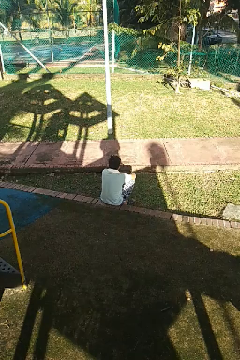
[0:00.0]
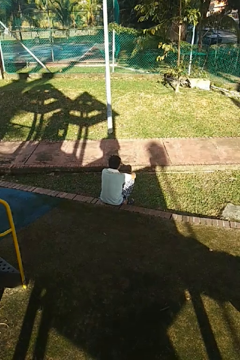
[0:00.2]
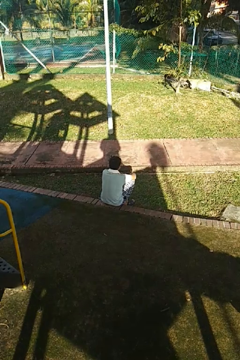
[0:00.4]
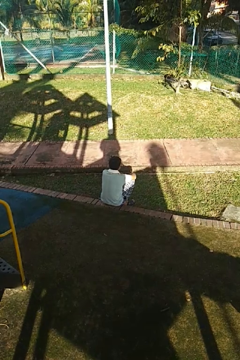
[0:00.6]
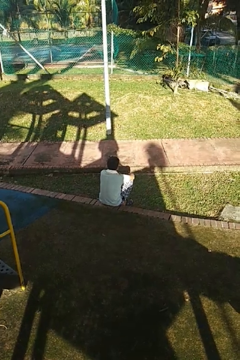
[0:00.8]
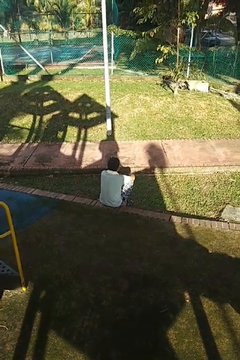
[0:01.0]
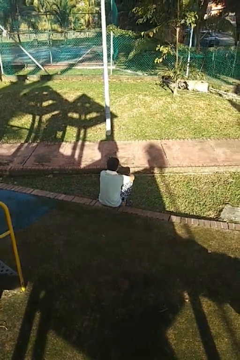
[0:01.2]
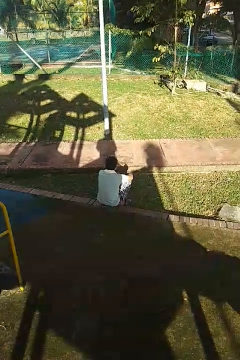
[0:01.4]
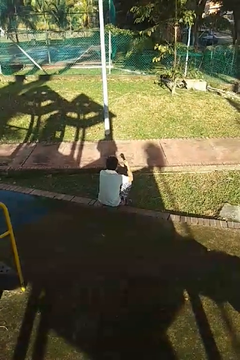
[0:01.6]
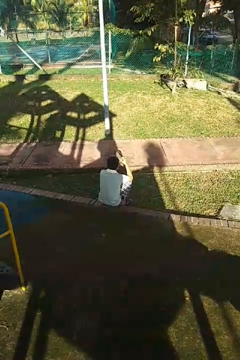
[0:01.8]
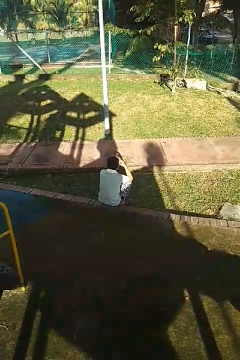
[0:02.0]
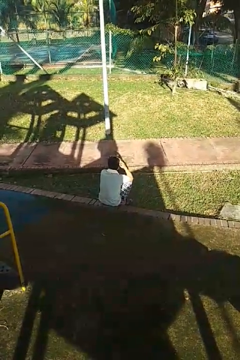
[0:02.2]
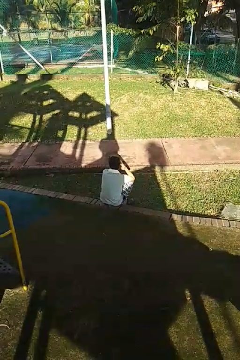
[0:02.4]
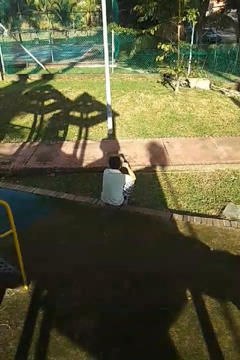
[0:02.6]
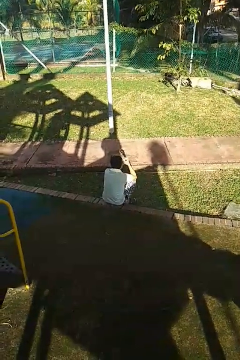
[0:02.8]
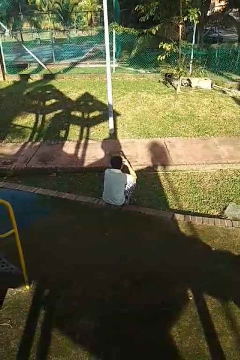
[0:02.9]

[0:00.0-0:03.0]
person strokes hair

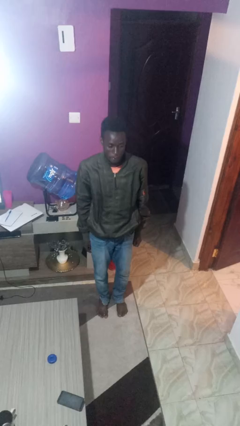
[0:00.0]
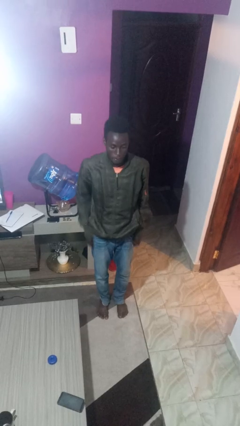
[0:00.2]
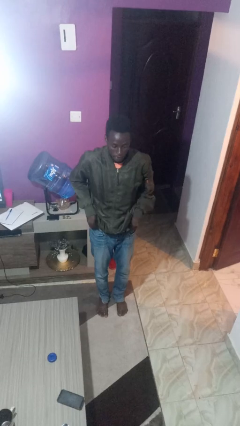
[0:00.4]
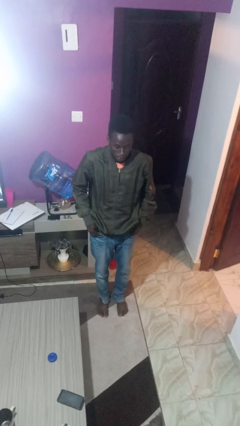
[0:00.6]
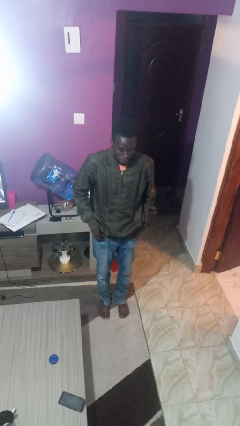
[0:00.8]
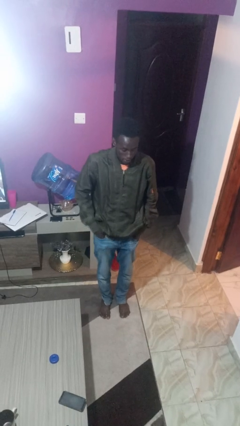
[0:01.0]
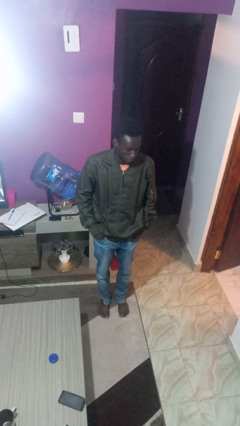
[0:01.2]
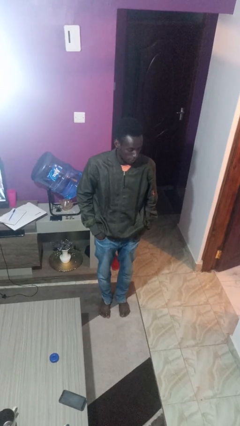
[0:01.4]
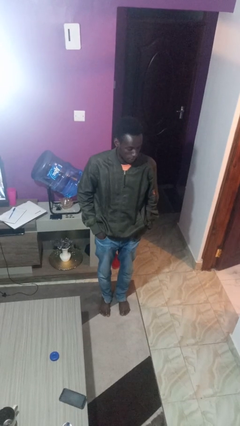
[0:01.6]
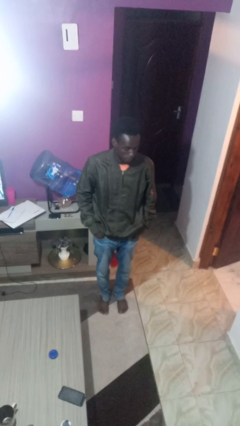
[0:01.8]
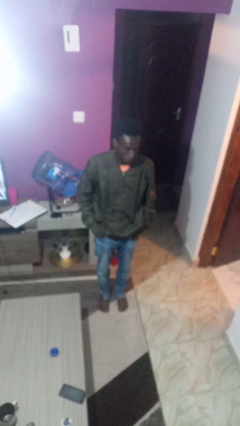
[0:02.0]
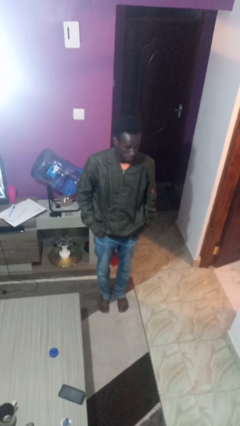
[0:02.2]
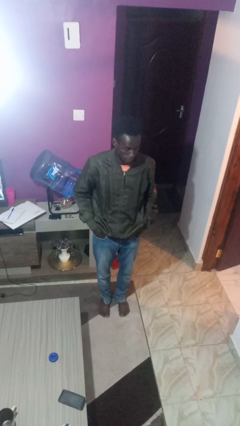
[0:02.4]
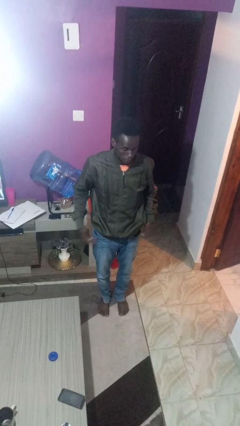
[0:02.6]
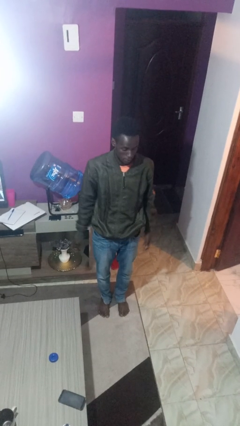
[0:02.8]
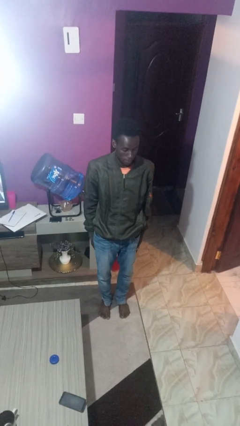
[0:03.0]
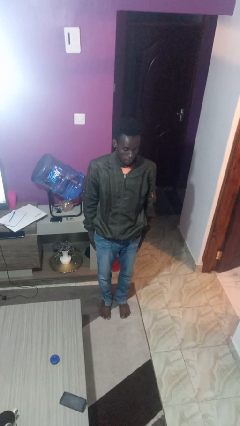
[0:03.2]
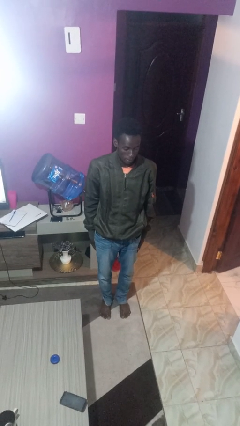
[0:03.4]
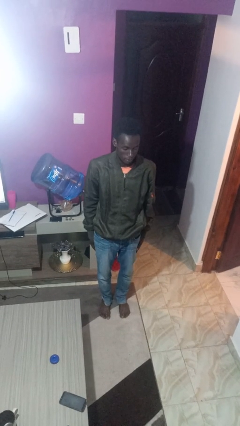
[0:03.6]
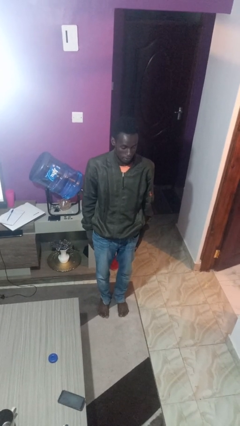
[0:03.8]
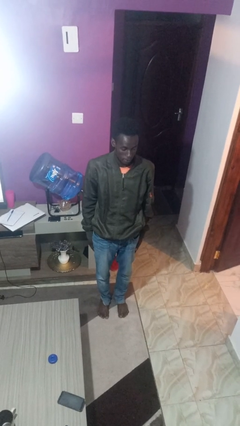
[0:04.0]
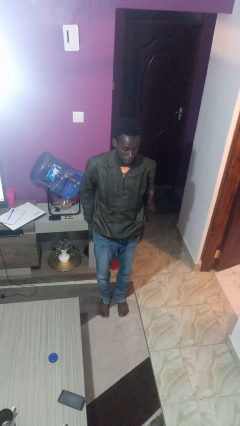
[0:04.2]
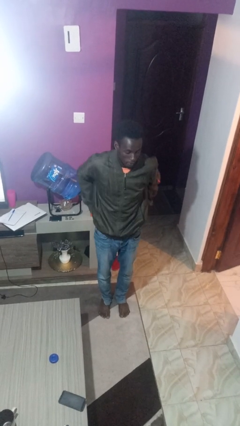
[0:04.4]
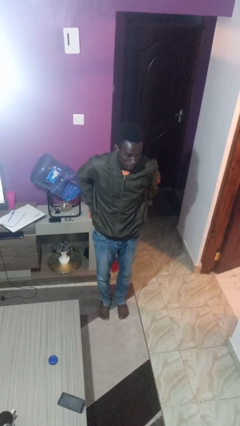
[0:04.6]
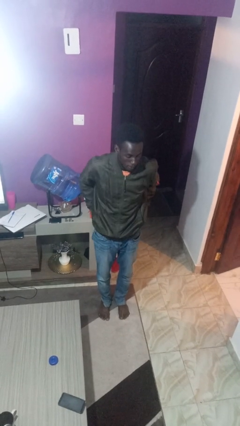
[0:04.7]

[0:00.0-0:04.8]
person puts hands in back pockets

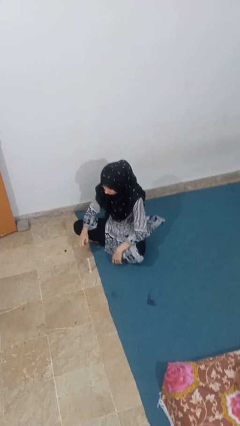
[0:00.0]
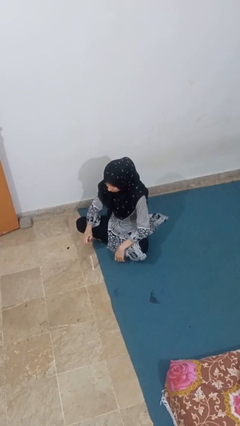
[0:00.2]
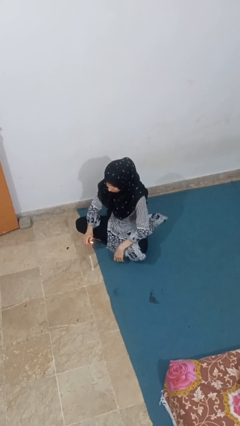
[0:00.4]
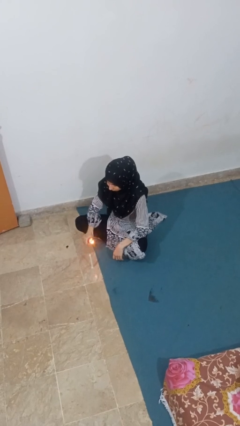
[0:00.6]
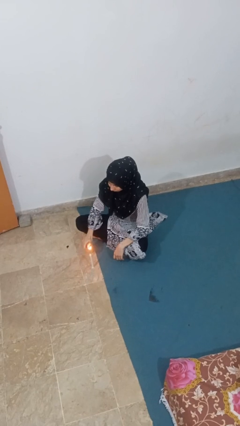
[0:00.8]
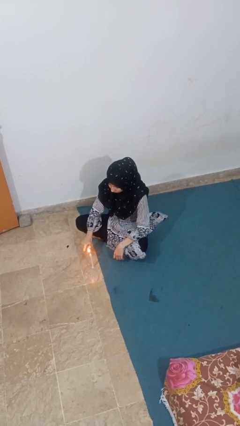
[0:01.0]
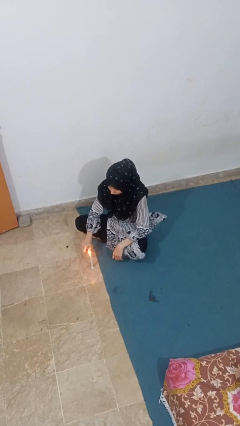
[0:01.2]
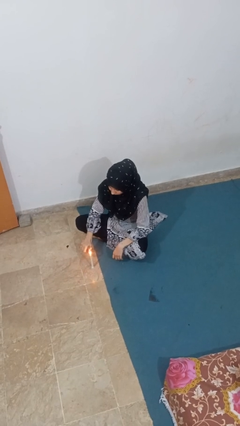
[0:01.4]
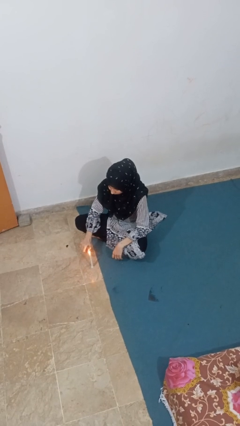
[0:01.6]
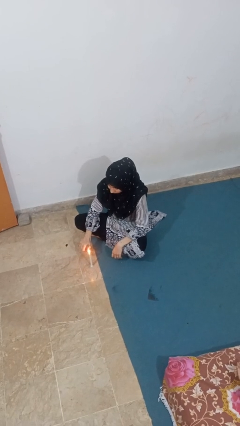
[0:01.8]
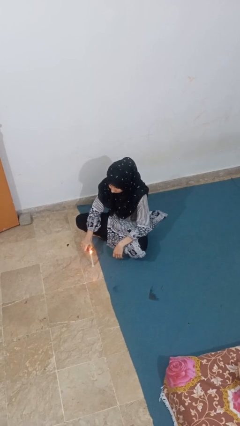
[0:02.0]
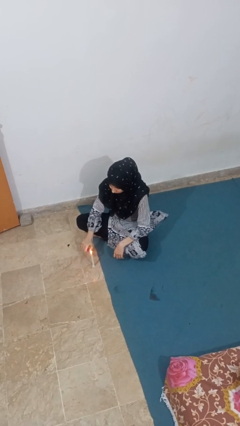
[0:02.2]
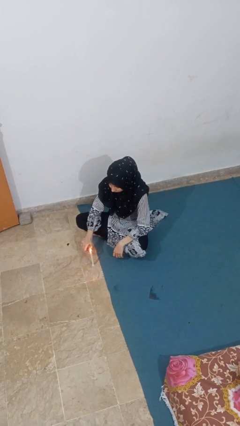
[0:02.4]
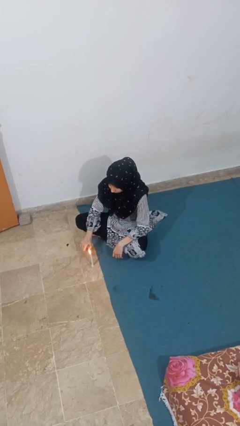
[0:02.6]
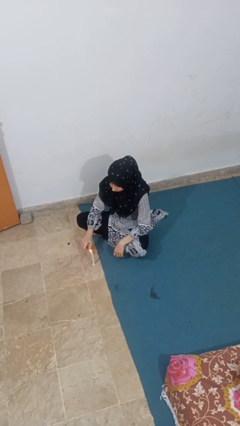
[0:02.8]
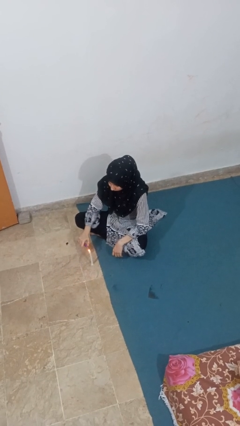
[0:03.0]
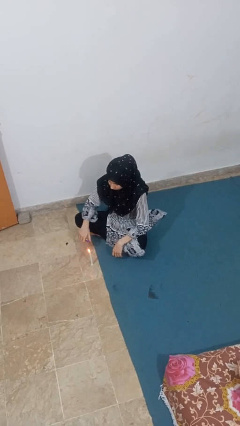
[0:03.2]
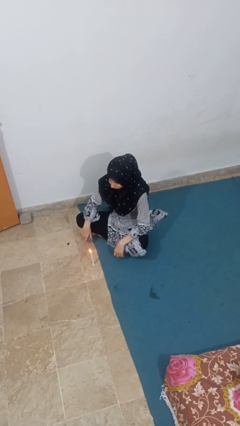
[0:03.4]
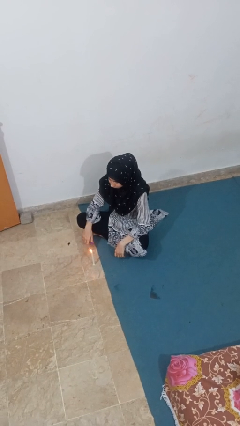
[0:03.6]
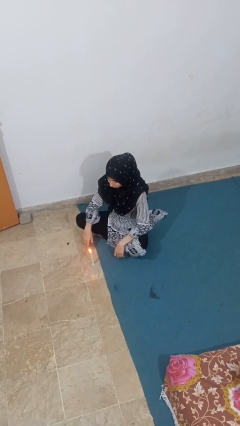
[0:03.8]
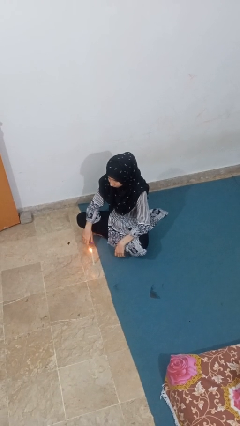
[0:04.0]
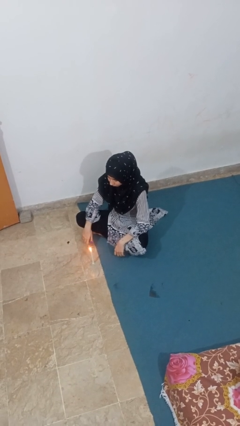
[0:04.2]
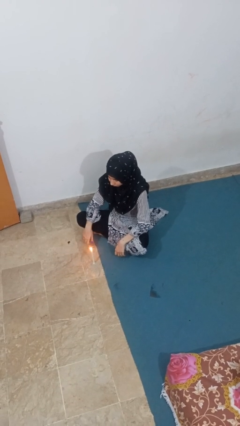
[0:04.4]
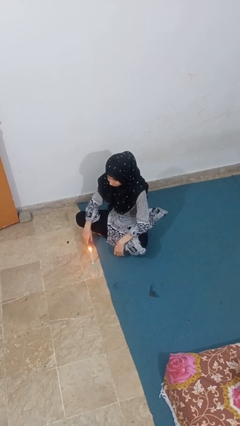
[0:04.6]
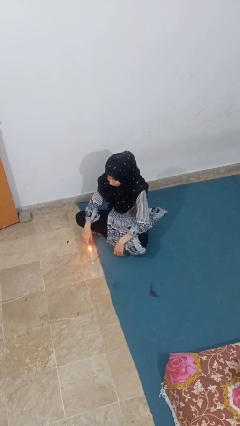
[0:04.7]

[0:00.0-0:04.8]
person lights candle

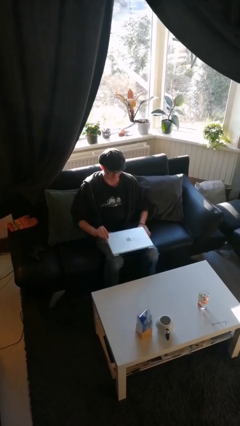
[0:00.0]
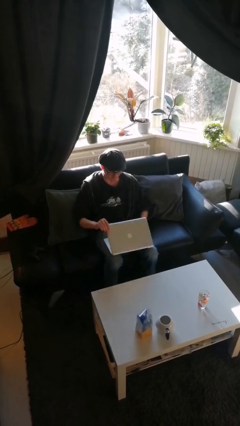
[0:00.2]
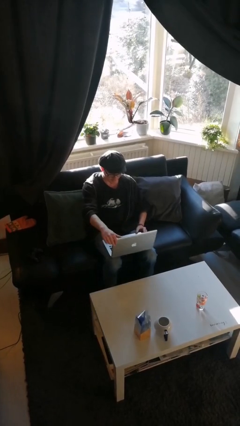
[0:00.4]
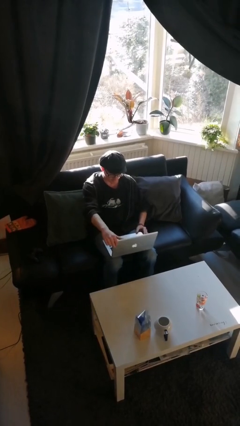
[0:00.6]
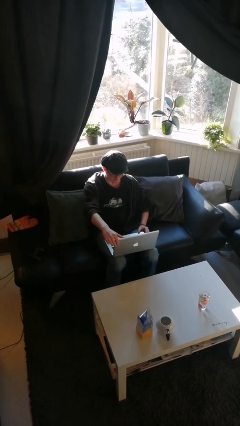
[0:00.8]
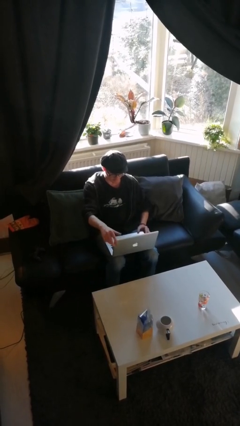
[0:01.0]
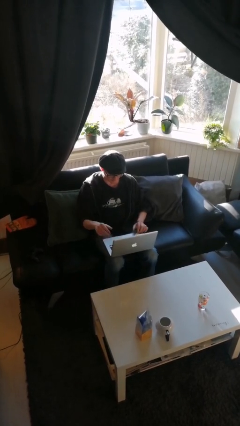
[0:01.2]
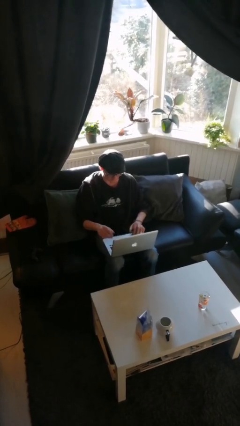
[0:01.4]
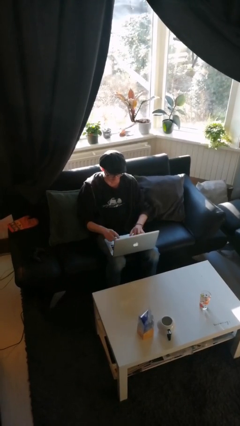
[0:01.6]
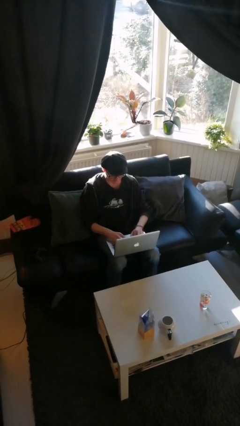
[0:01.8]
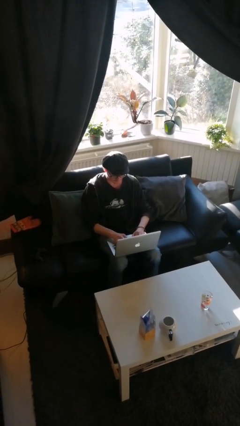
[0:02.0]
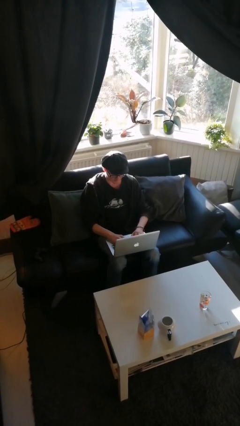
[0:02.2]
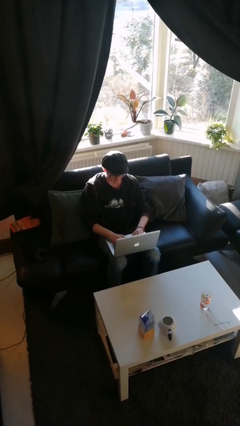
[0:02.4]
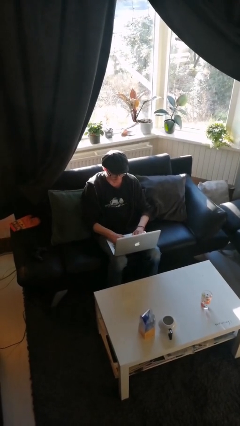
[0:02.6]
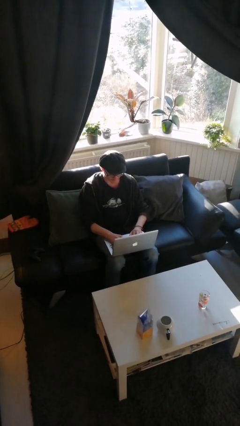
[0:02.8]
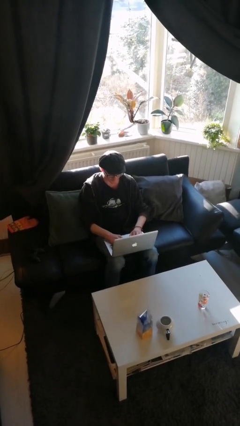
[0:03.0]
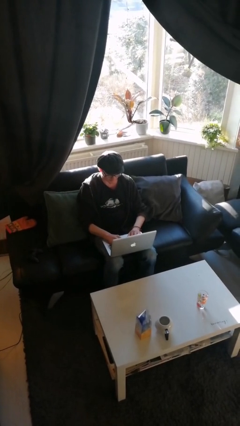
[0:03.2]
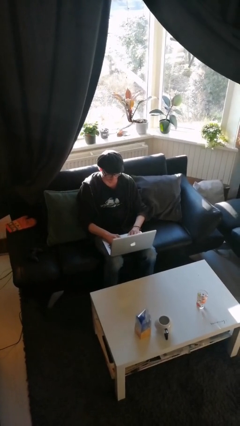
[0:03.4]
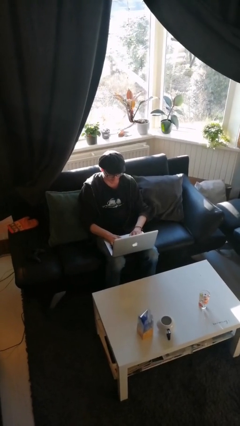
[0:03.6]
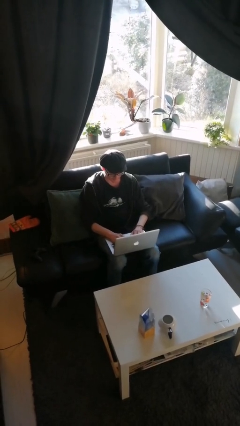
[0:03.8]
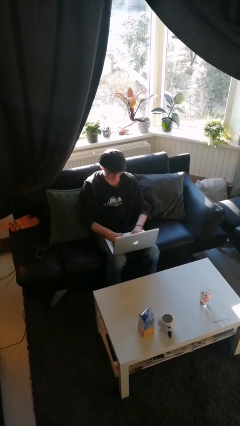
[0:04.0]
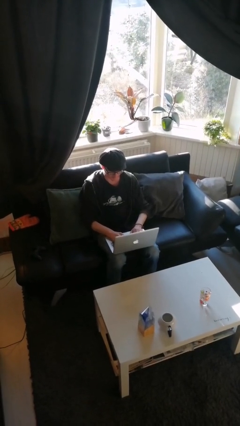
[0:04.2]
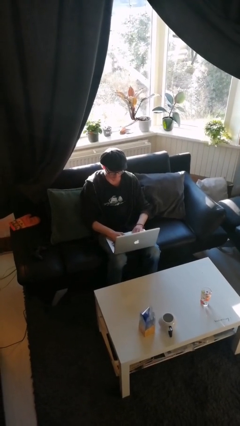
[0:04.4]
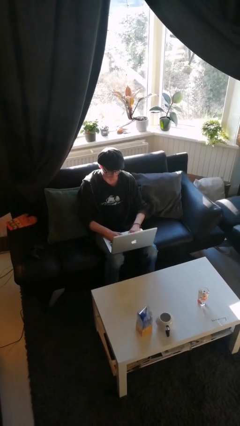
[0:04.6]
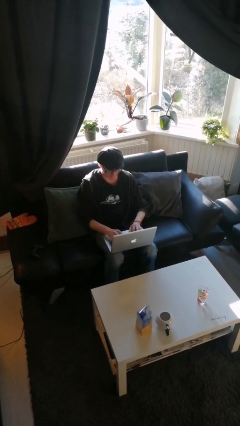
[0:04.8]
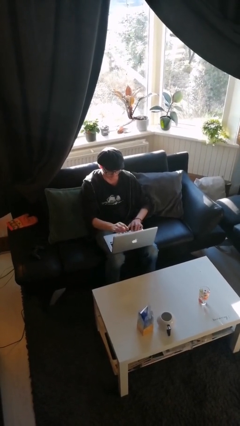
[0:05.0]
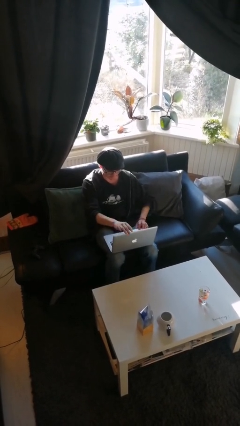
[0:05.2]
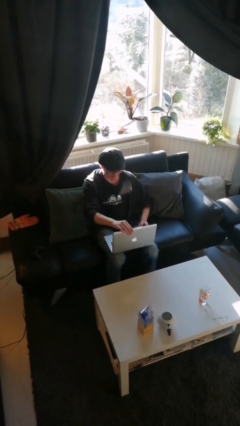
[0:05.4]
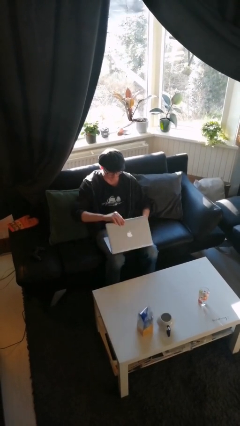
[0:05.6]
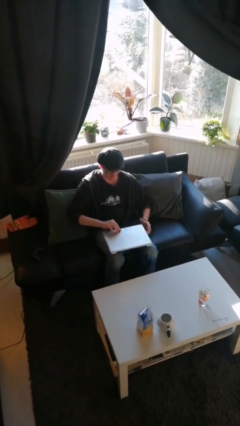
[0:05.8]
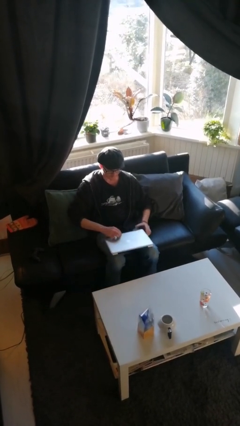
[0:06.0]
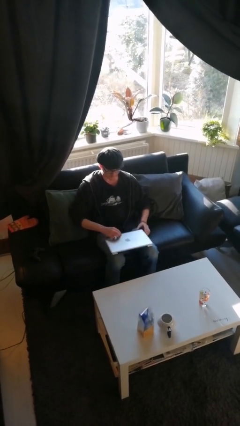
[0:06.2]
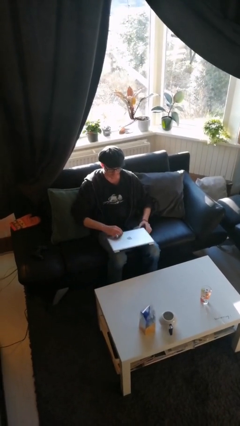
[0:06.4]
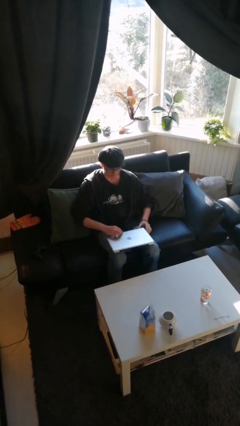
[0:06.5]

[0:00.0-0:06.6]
person interacts with laptop
